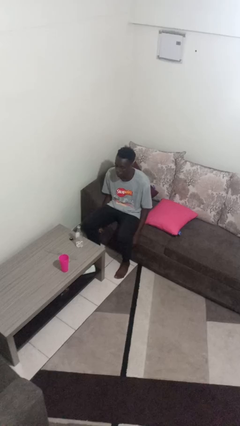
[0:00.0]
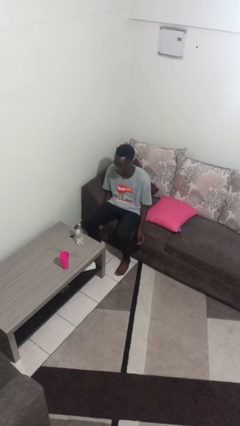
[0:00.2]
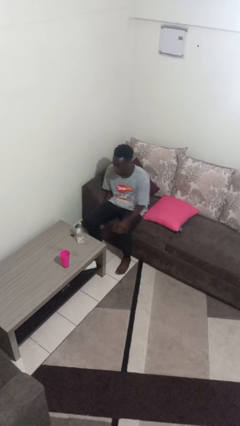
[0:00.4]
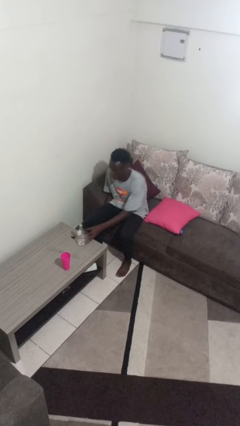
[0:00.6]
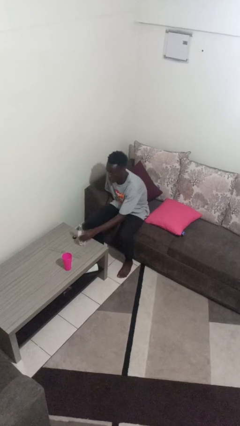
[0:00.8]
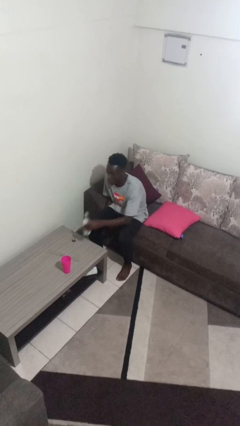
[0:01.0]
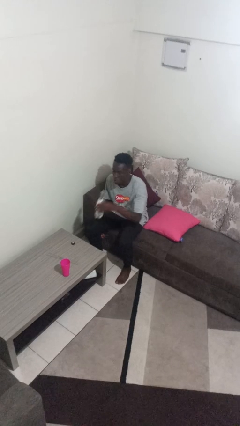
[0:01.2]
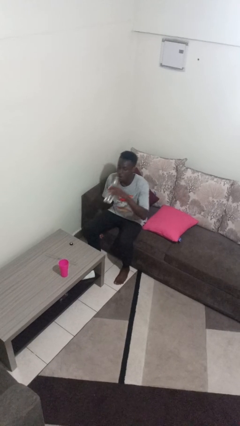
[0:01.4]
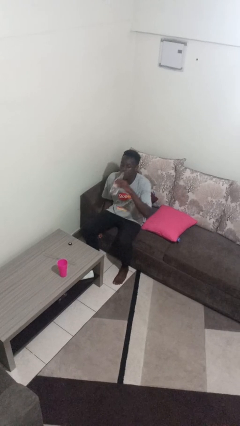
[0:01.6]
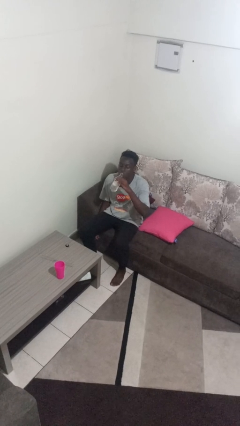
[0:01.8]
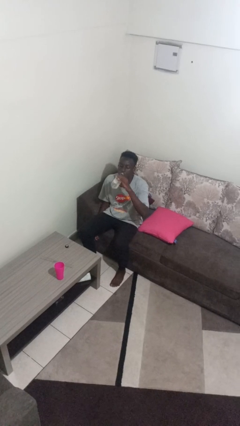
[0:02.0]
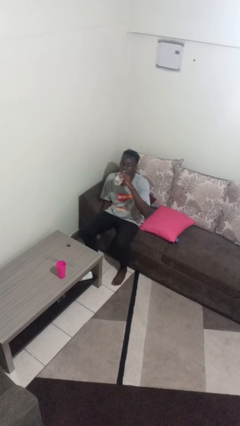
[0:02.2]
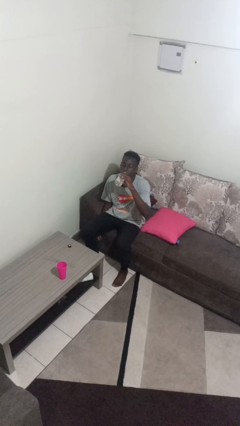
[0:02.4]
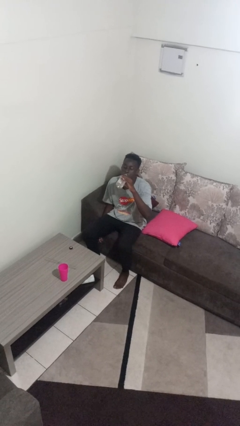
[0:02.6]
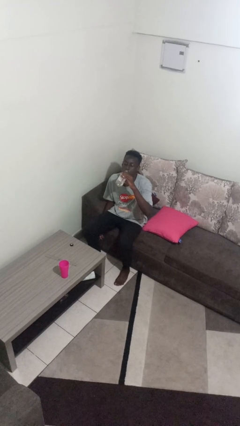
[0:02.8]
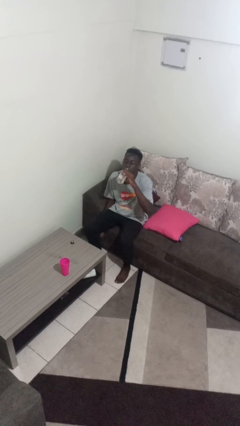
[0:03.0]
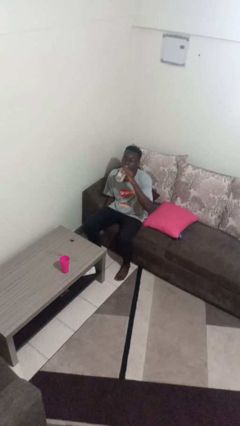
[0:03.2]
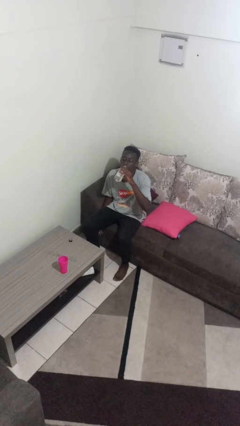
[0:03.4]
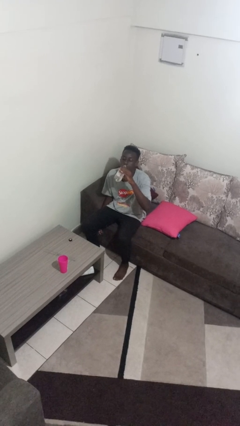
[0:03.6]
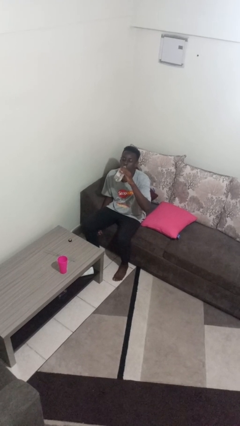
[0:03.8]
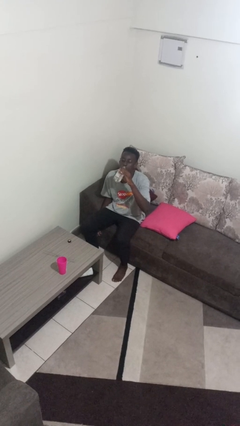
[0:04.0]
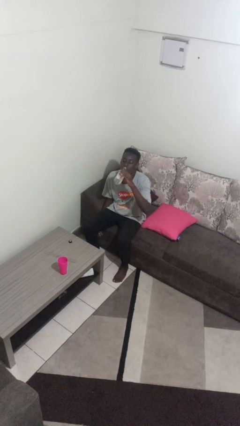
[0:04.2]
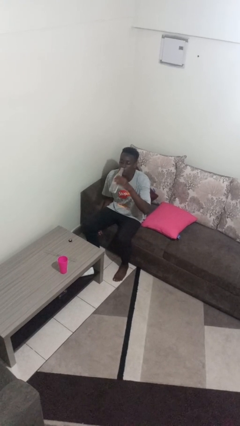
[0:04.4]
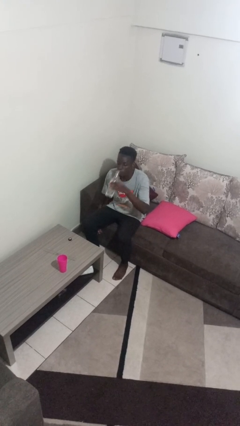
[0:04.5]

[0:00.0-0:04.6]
person drinks from bottle

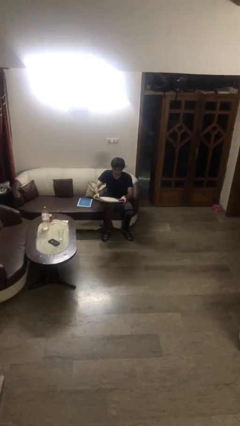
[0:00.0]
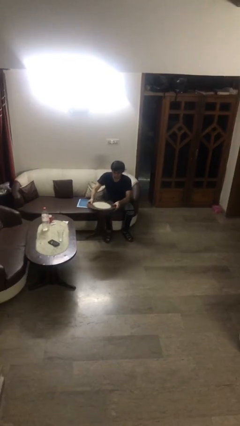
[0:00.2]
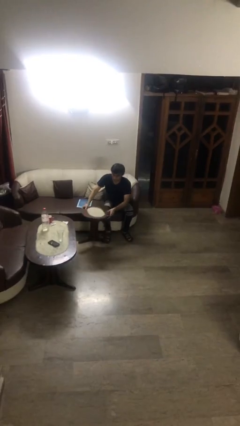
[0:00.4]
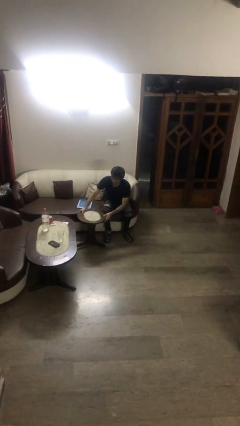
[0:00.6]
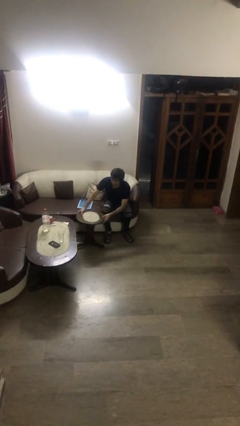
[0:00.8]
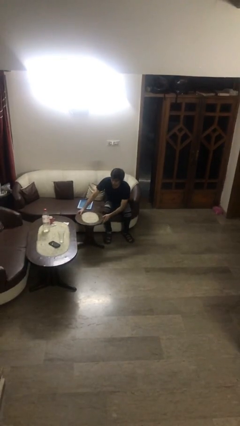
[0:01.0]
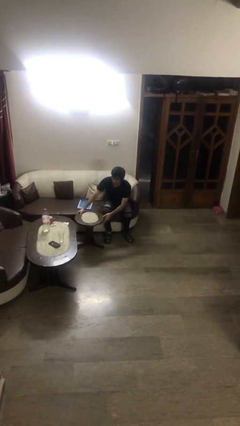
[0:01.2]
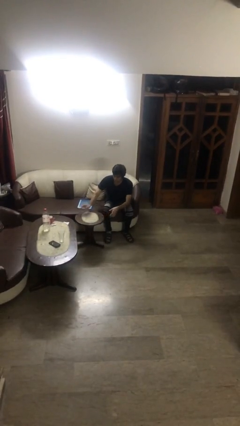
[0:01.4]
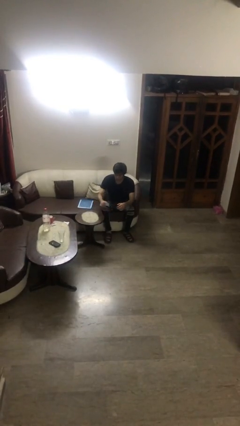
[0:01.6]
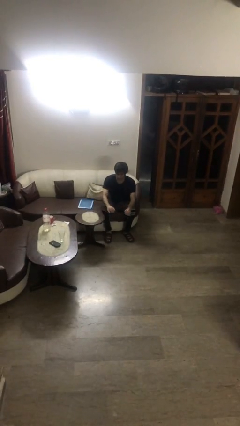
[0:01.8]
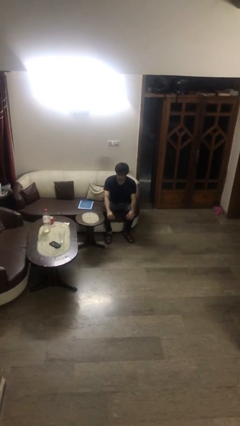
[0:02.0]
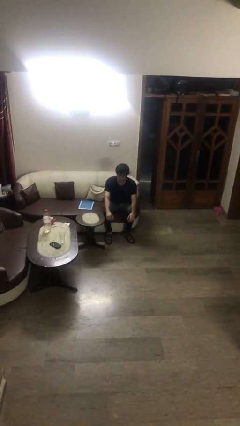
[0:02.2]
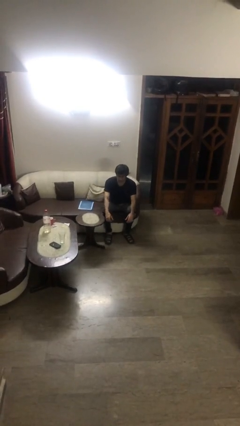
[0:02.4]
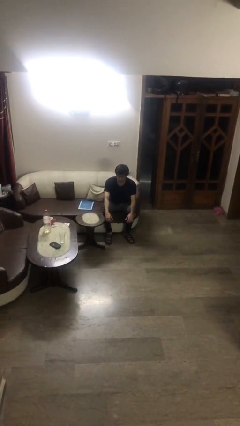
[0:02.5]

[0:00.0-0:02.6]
person puts down object on floor

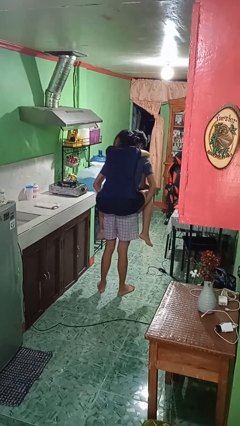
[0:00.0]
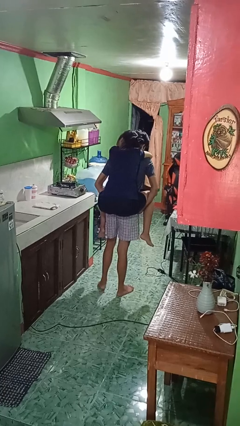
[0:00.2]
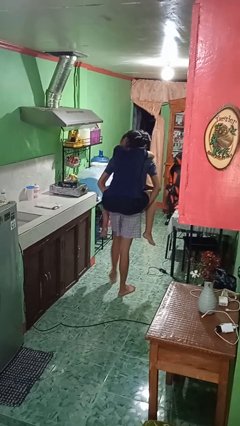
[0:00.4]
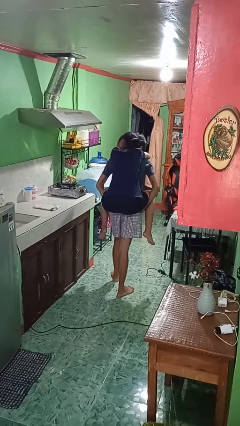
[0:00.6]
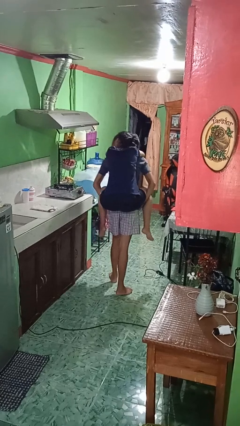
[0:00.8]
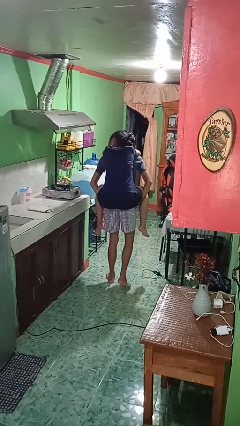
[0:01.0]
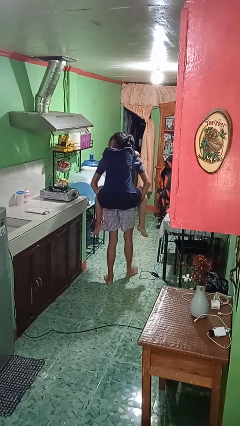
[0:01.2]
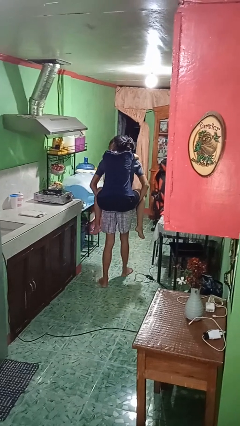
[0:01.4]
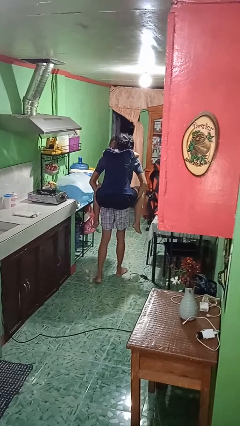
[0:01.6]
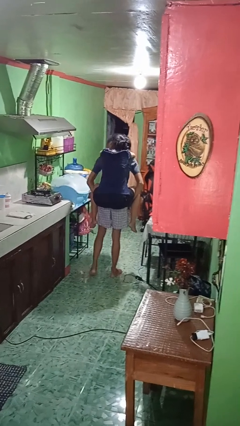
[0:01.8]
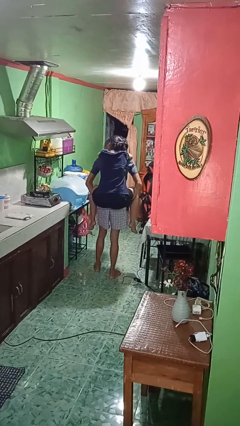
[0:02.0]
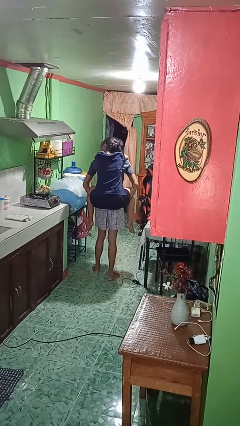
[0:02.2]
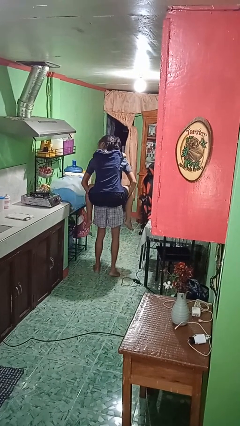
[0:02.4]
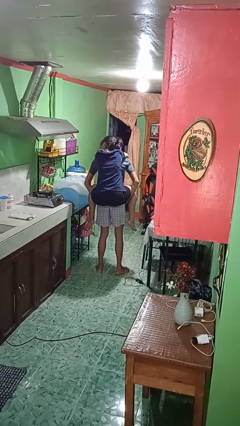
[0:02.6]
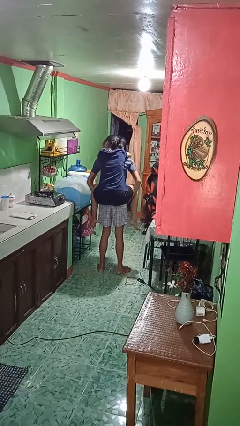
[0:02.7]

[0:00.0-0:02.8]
person carries person on back

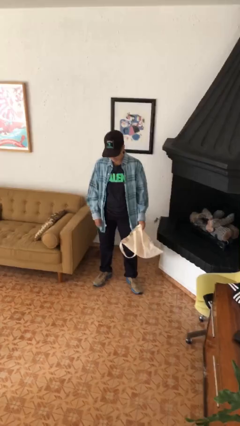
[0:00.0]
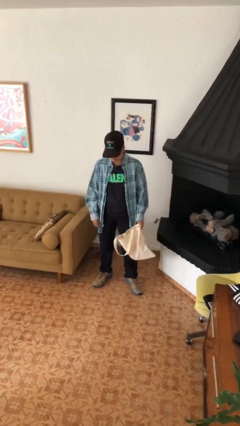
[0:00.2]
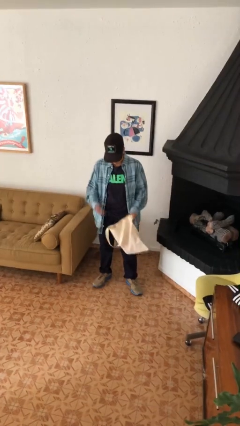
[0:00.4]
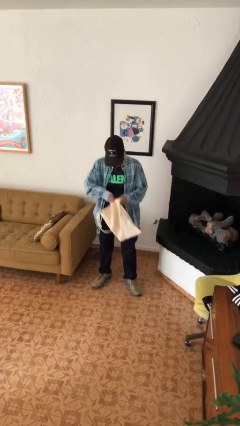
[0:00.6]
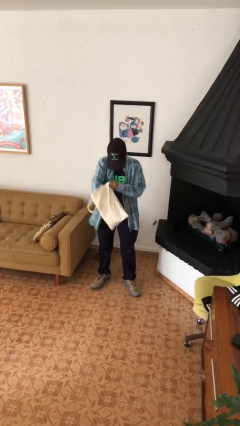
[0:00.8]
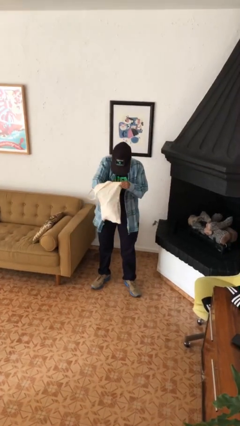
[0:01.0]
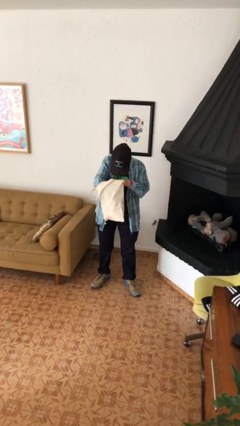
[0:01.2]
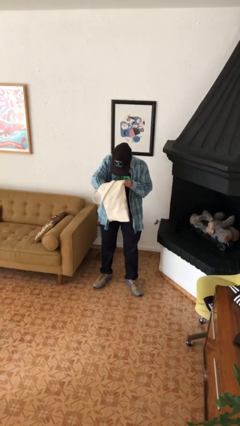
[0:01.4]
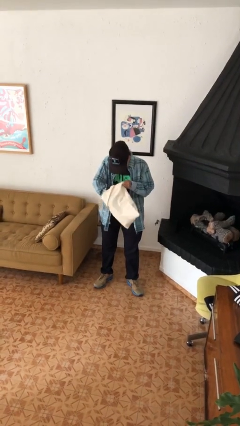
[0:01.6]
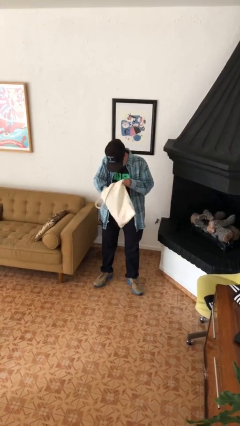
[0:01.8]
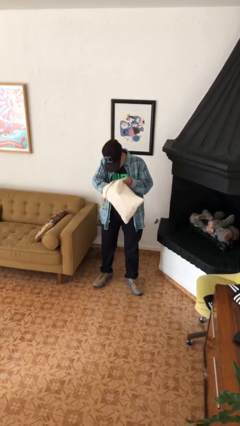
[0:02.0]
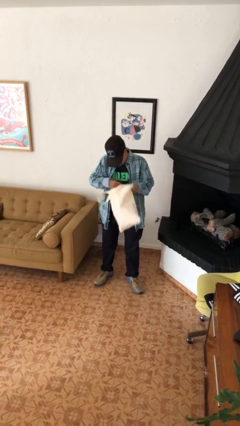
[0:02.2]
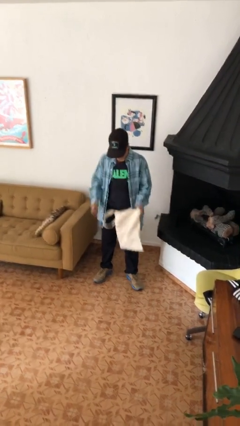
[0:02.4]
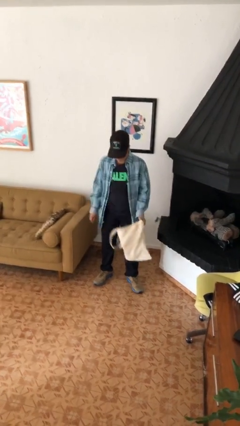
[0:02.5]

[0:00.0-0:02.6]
person searches in bag

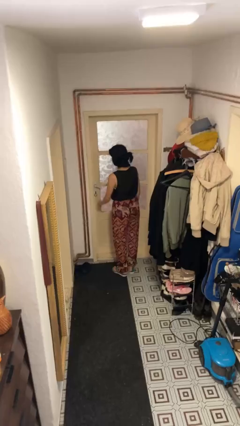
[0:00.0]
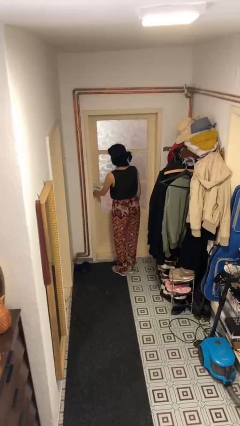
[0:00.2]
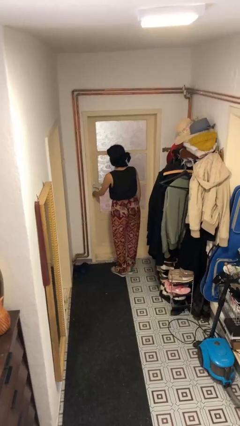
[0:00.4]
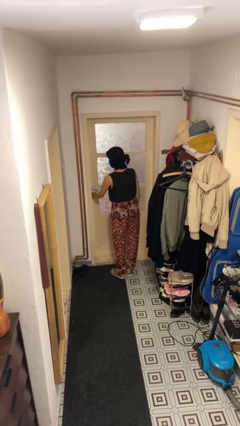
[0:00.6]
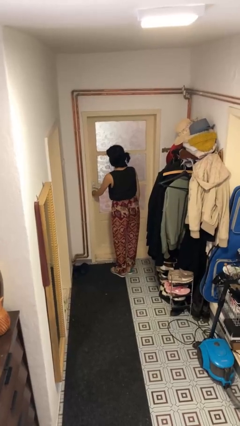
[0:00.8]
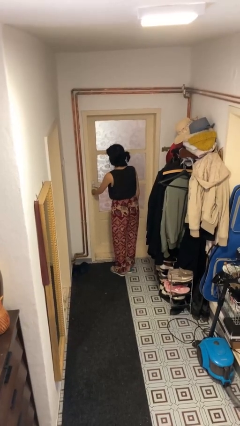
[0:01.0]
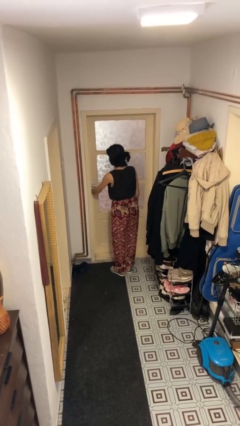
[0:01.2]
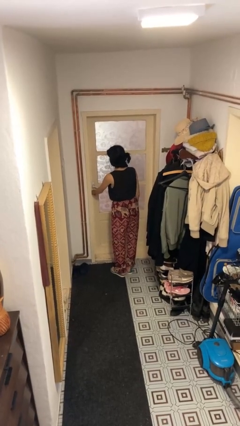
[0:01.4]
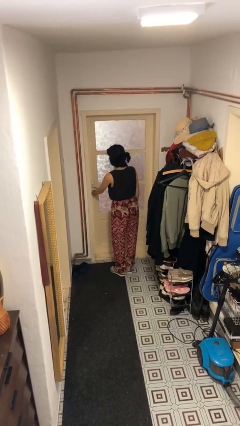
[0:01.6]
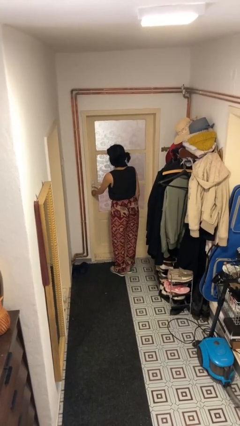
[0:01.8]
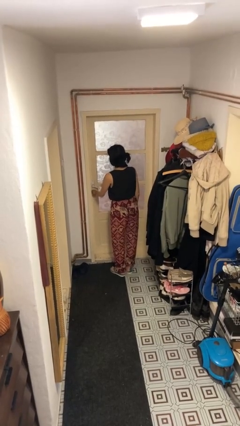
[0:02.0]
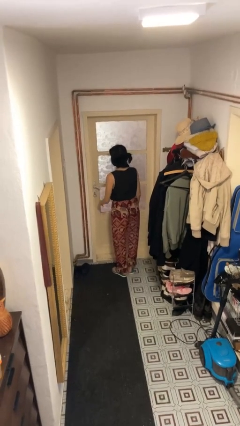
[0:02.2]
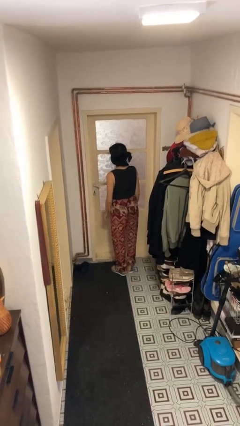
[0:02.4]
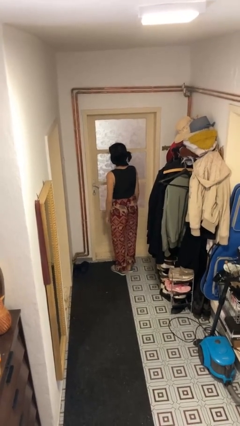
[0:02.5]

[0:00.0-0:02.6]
person locks door with keys

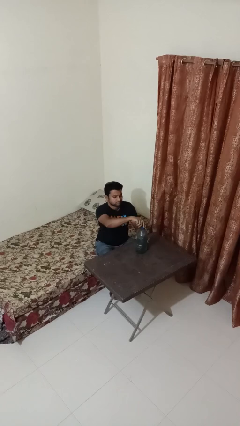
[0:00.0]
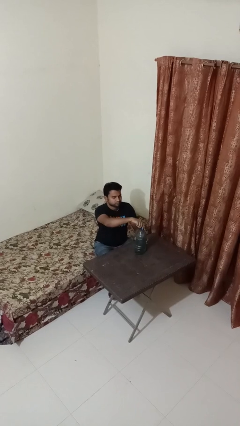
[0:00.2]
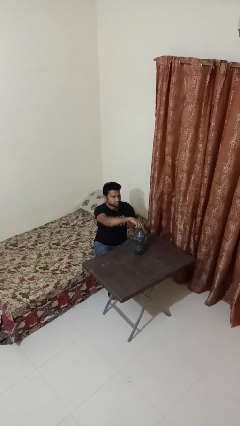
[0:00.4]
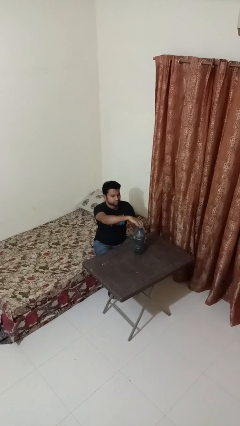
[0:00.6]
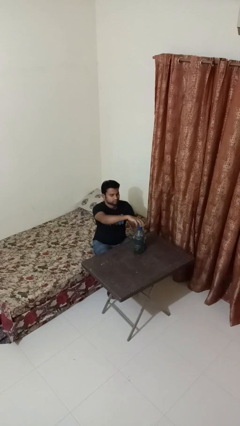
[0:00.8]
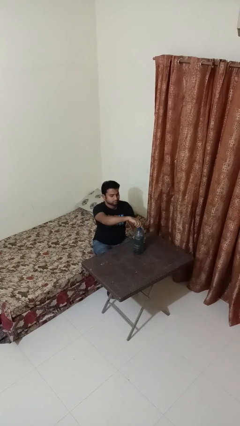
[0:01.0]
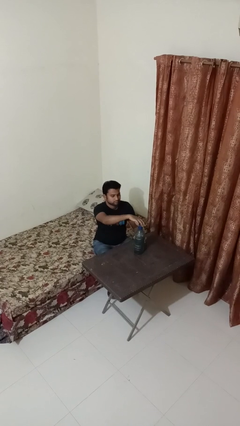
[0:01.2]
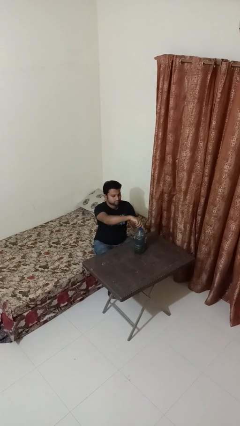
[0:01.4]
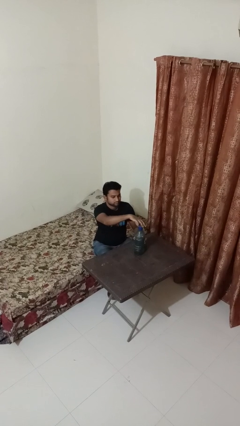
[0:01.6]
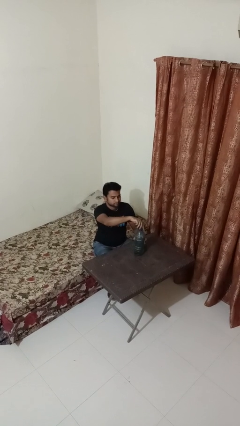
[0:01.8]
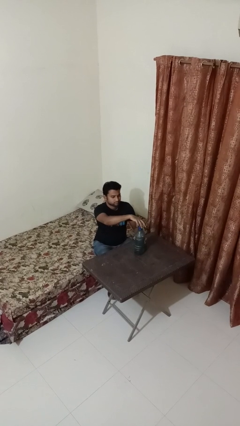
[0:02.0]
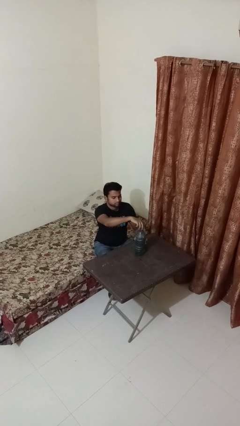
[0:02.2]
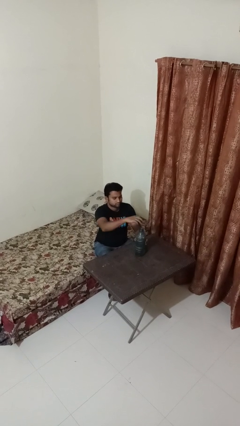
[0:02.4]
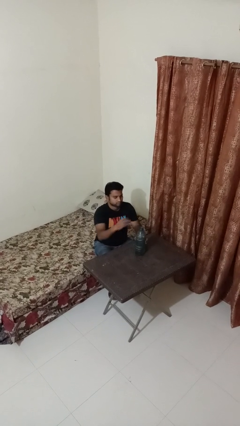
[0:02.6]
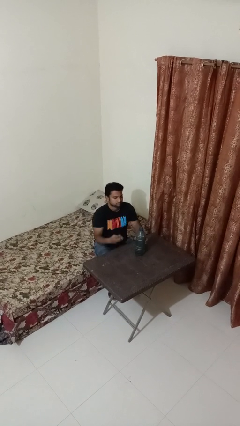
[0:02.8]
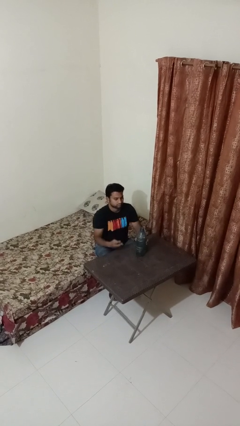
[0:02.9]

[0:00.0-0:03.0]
person unscrews lid from bottle
